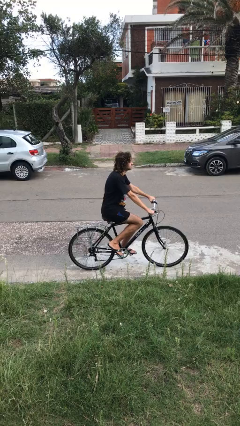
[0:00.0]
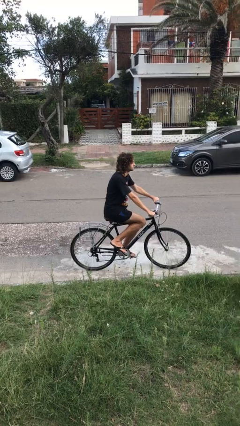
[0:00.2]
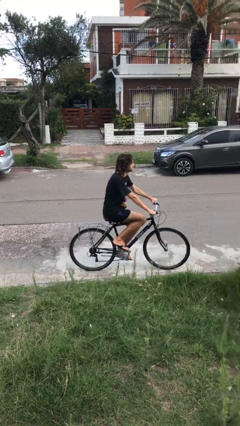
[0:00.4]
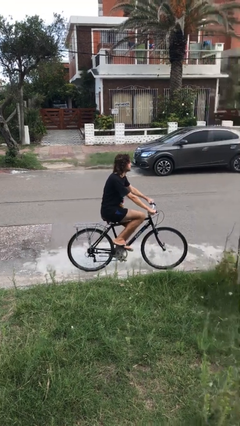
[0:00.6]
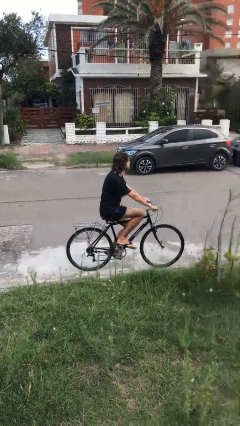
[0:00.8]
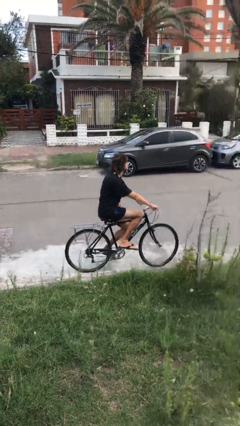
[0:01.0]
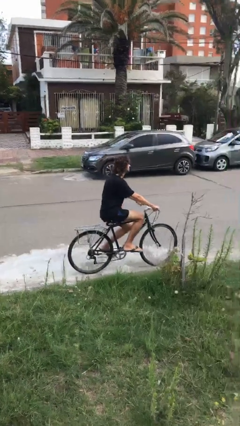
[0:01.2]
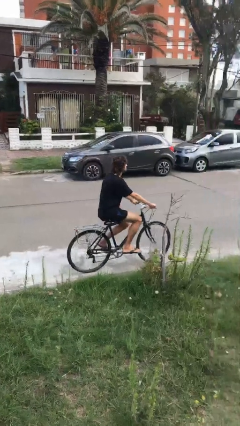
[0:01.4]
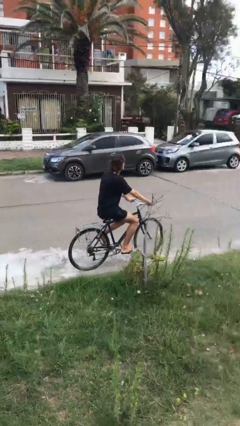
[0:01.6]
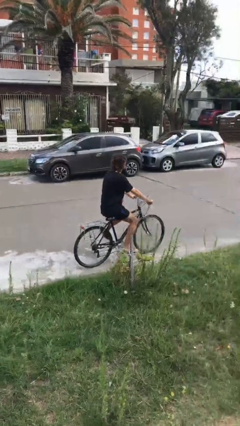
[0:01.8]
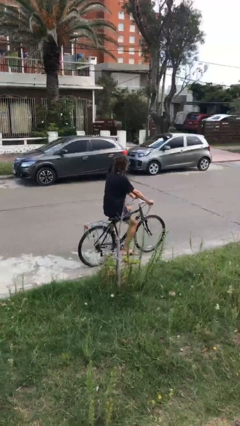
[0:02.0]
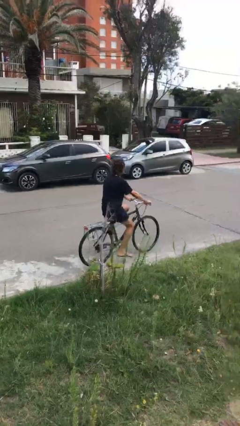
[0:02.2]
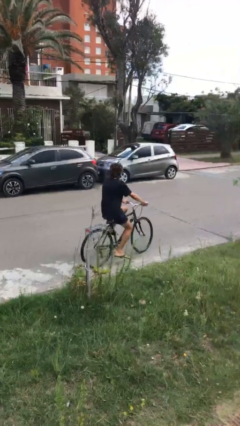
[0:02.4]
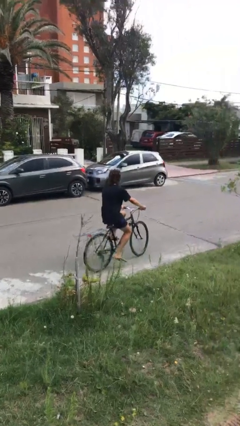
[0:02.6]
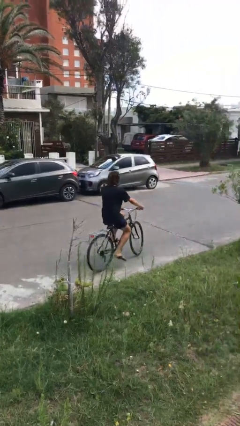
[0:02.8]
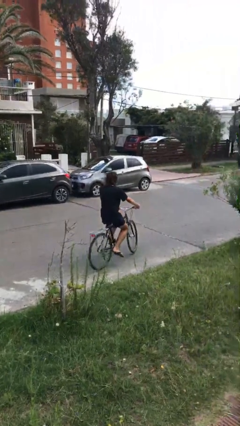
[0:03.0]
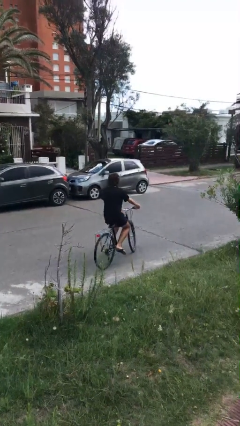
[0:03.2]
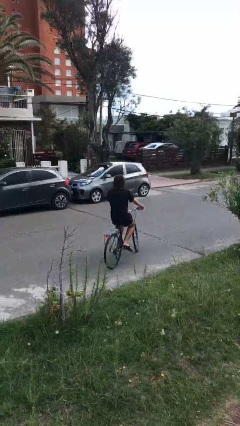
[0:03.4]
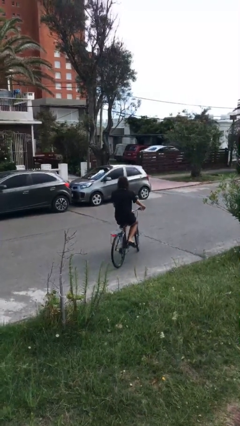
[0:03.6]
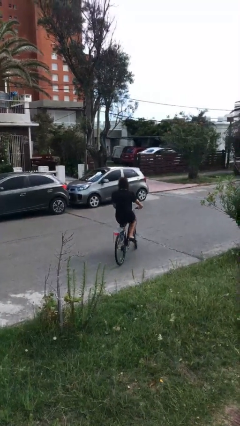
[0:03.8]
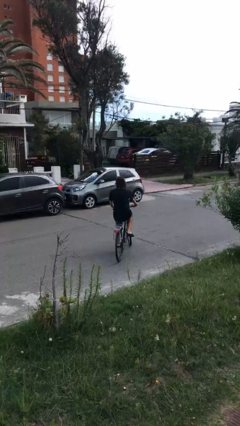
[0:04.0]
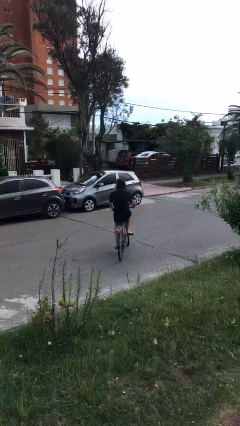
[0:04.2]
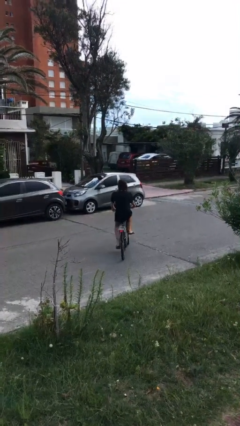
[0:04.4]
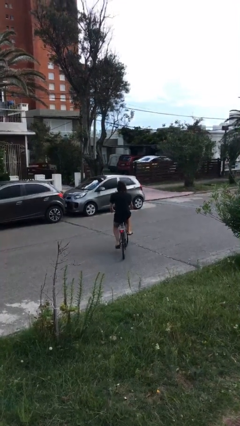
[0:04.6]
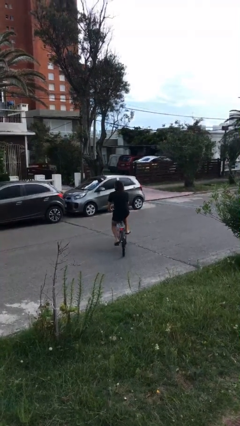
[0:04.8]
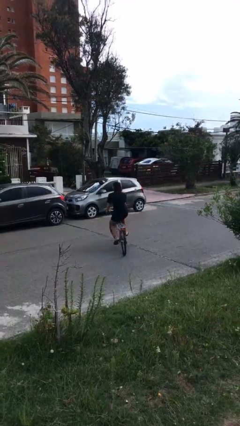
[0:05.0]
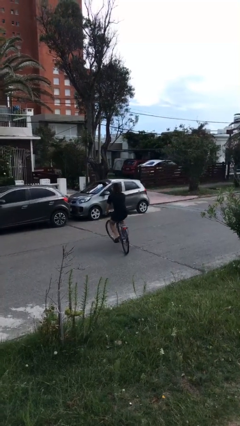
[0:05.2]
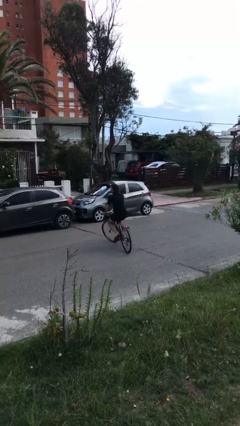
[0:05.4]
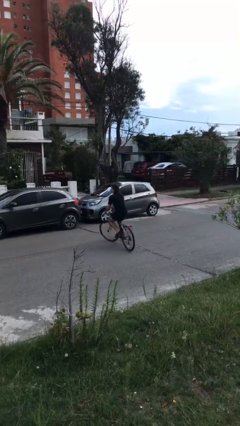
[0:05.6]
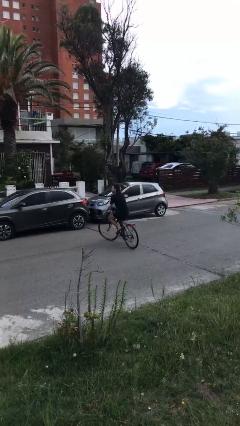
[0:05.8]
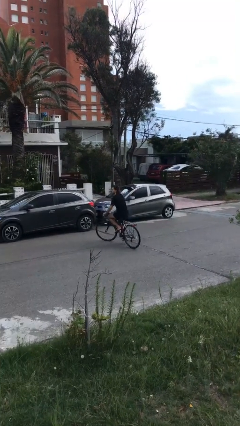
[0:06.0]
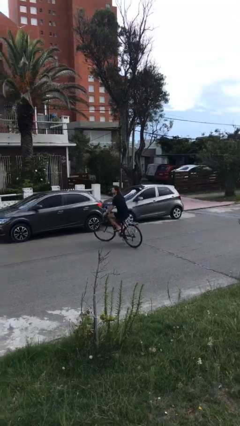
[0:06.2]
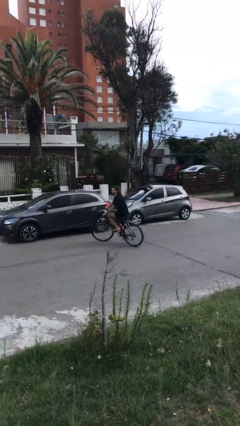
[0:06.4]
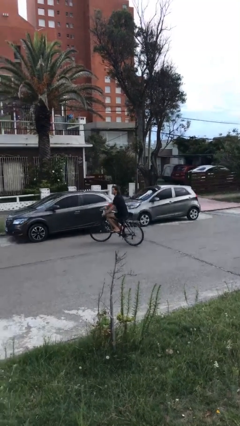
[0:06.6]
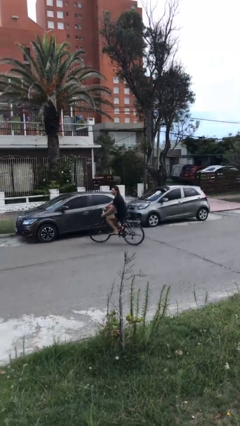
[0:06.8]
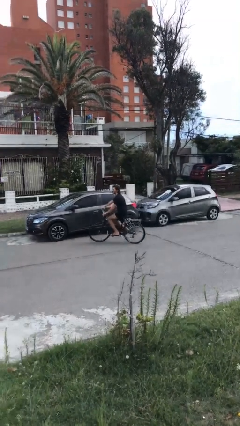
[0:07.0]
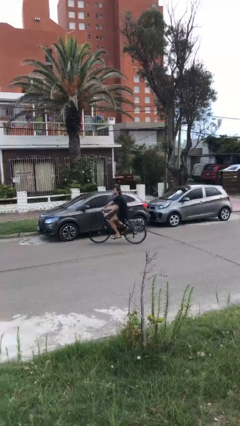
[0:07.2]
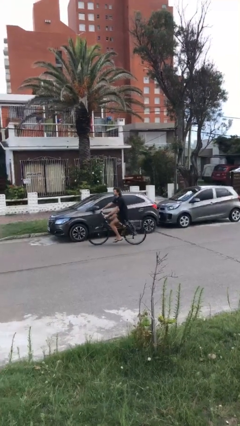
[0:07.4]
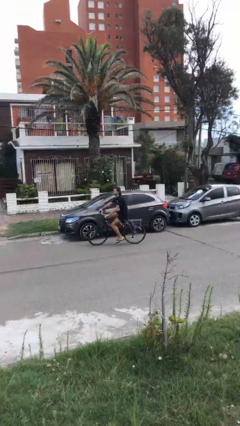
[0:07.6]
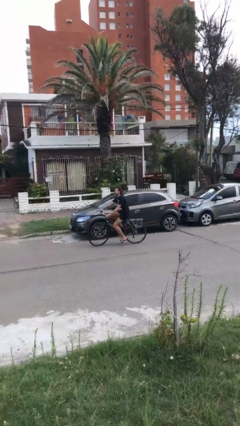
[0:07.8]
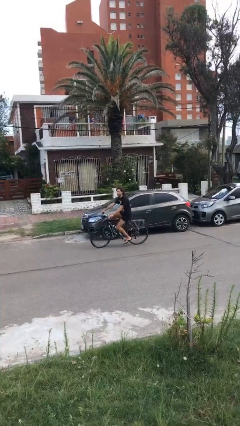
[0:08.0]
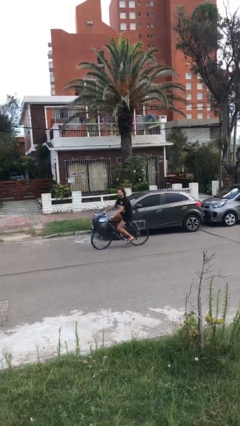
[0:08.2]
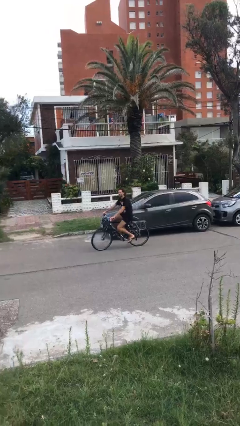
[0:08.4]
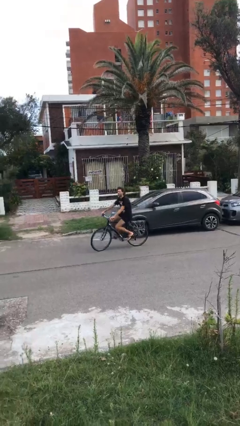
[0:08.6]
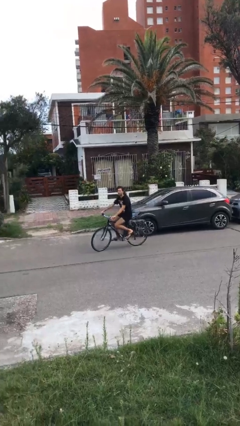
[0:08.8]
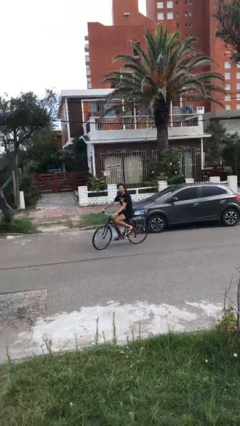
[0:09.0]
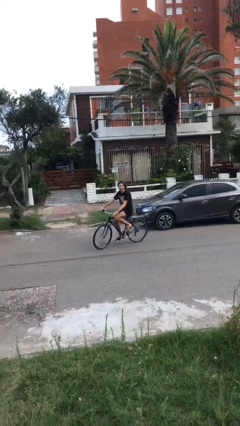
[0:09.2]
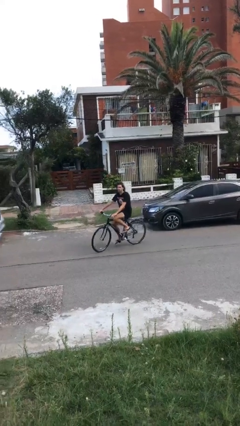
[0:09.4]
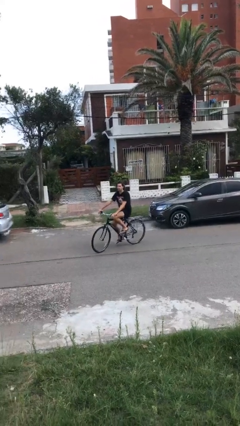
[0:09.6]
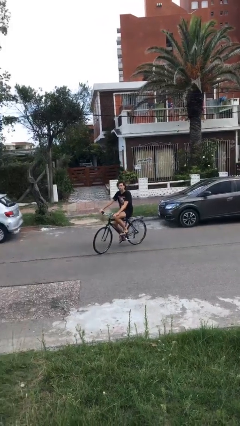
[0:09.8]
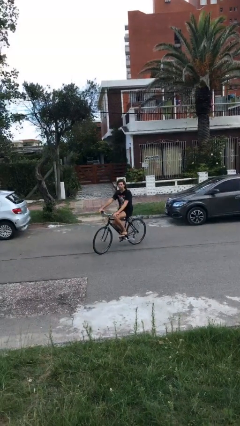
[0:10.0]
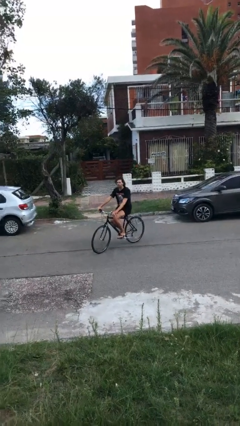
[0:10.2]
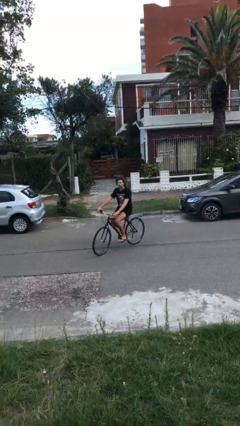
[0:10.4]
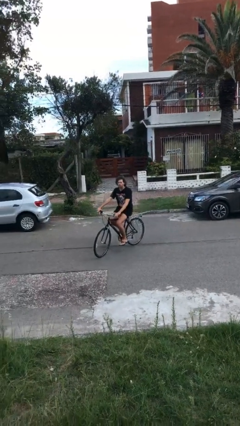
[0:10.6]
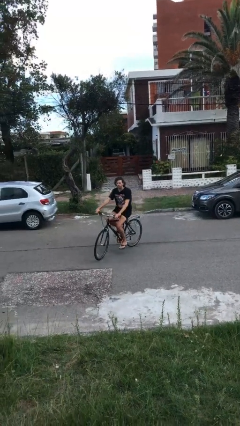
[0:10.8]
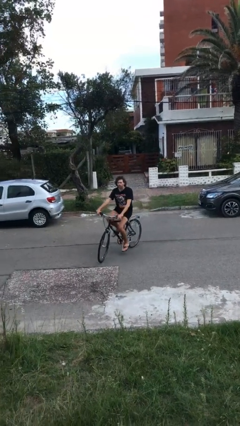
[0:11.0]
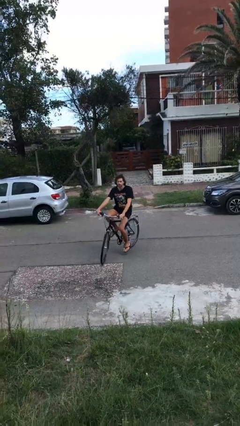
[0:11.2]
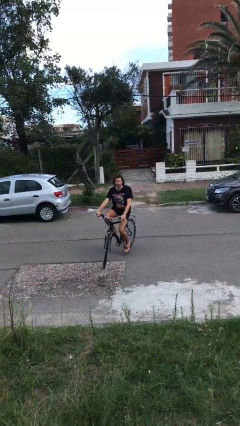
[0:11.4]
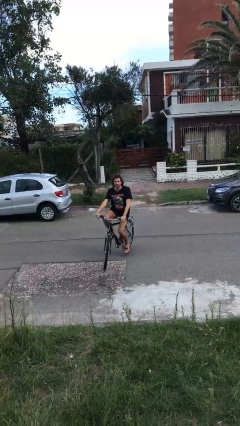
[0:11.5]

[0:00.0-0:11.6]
person rides bicycle

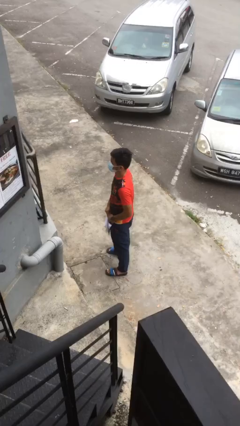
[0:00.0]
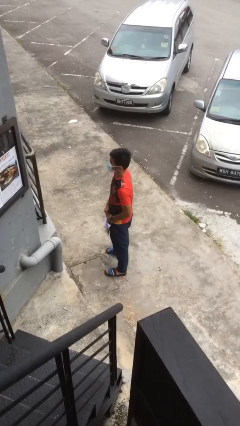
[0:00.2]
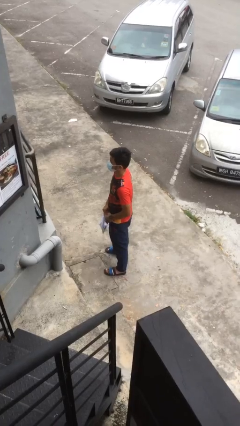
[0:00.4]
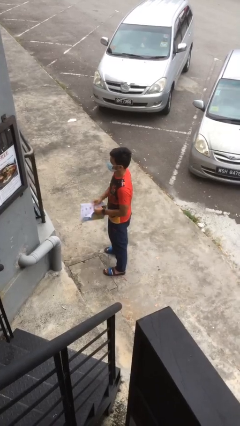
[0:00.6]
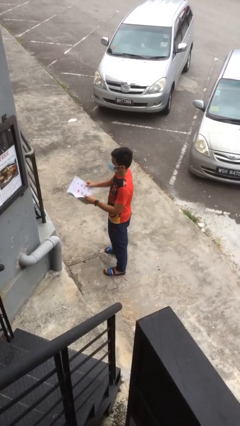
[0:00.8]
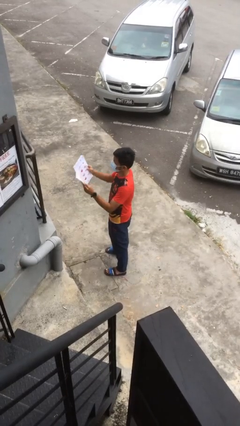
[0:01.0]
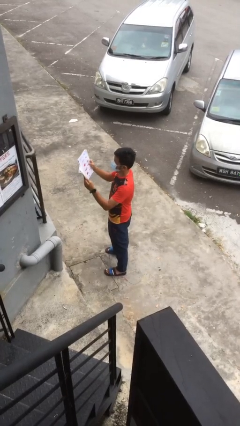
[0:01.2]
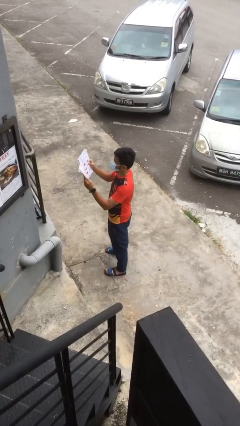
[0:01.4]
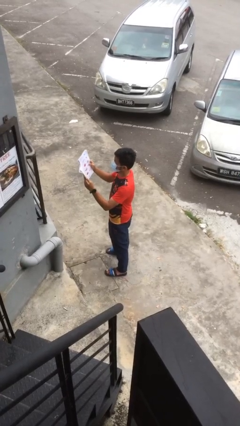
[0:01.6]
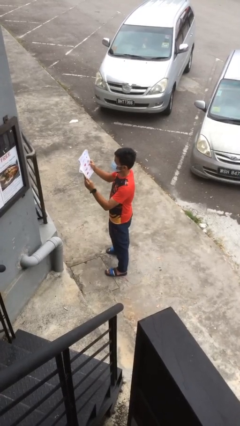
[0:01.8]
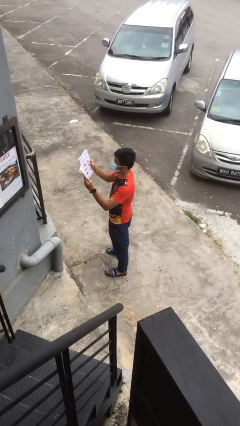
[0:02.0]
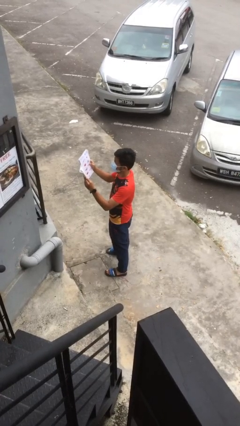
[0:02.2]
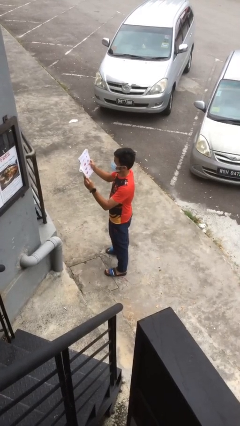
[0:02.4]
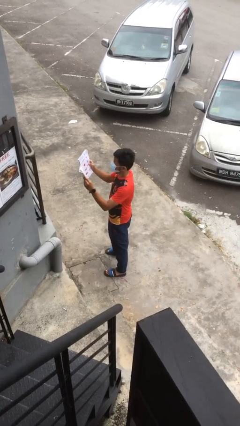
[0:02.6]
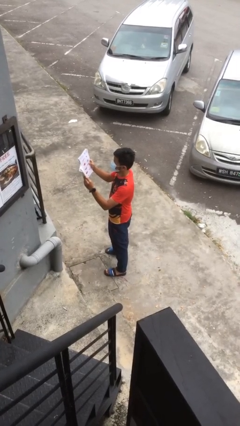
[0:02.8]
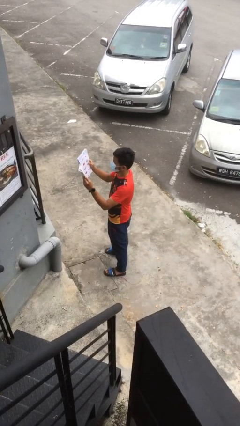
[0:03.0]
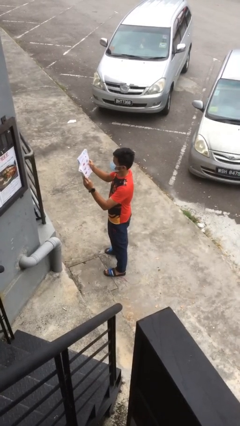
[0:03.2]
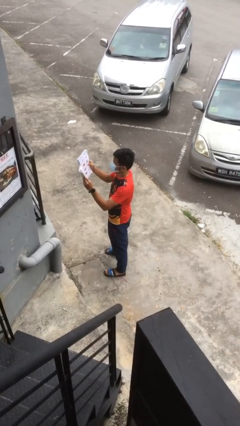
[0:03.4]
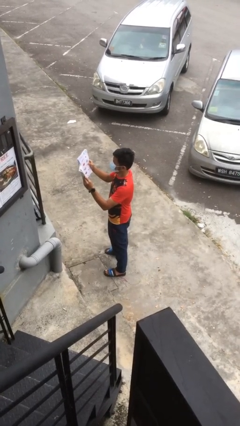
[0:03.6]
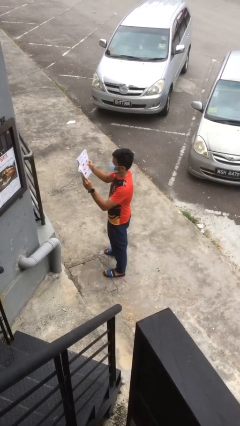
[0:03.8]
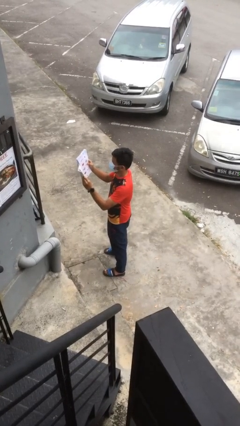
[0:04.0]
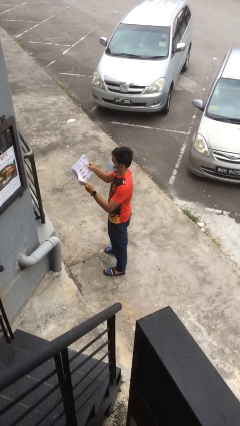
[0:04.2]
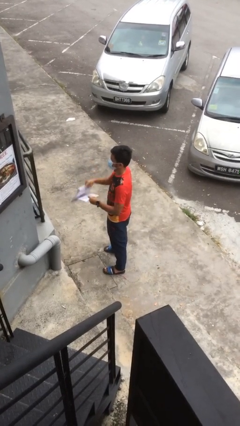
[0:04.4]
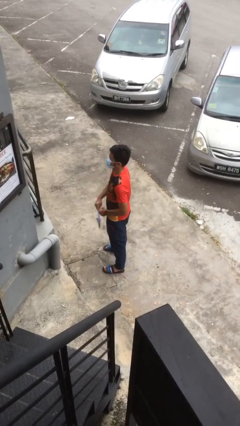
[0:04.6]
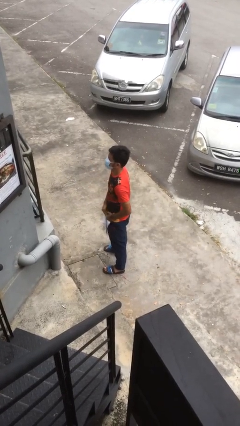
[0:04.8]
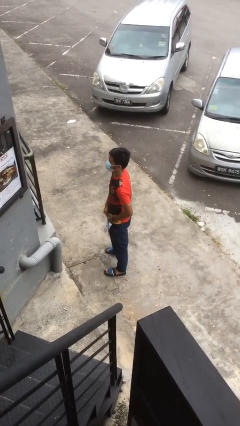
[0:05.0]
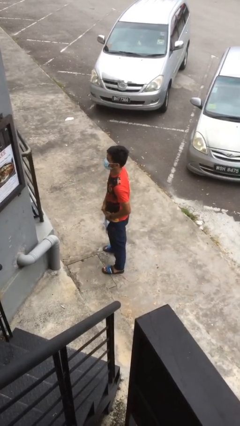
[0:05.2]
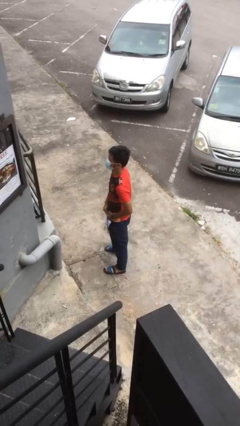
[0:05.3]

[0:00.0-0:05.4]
person reads document

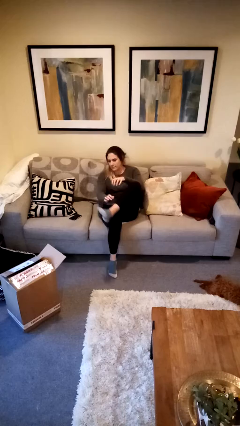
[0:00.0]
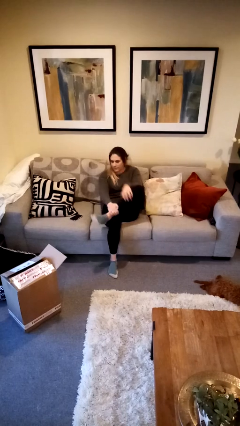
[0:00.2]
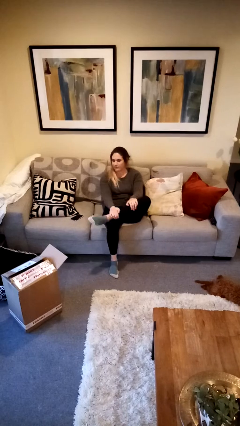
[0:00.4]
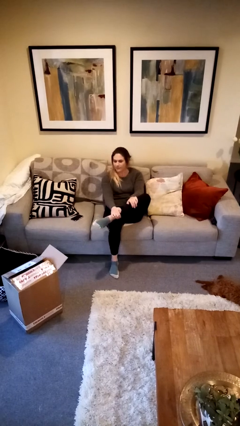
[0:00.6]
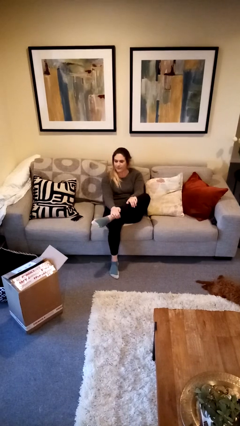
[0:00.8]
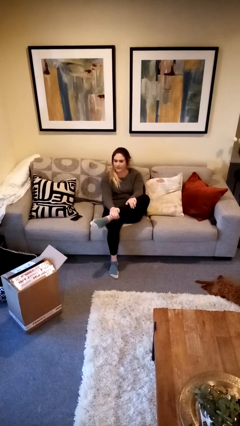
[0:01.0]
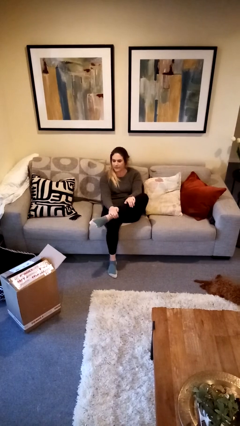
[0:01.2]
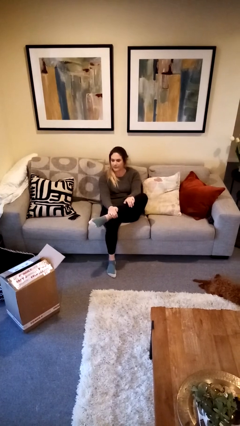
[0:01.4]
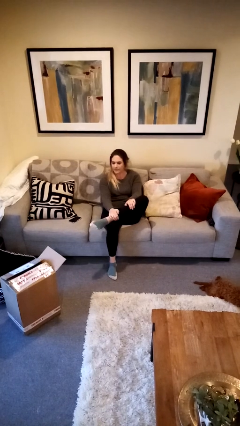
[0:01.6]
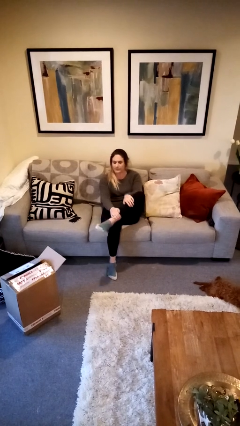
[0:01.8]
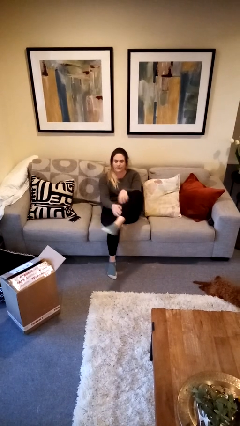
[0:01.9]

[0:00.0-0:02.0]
person crosses legs
